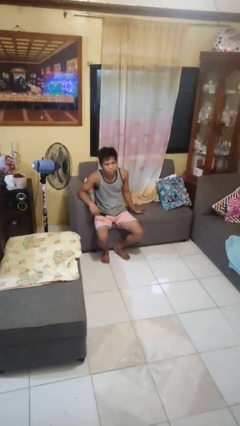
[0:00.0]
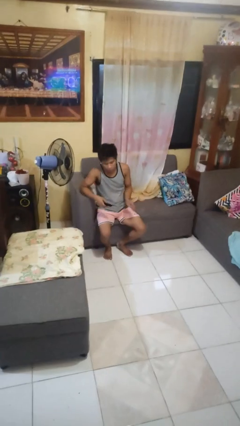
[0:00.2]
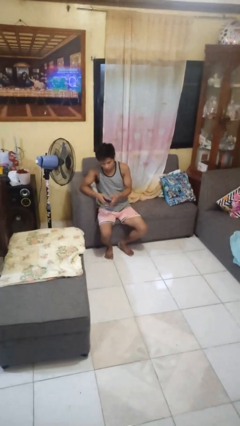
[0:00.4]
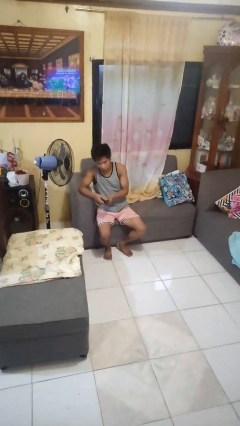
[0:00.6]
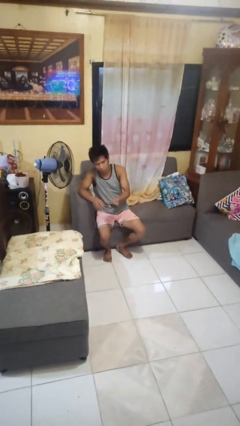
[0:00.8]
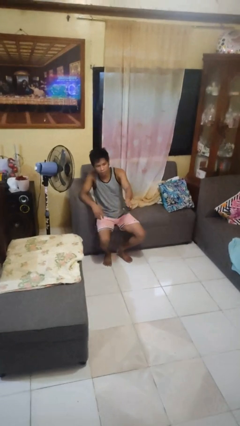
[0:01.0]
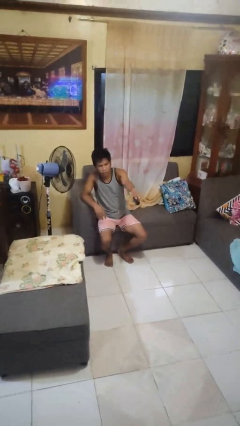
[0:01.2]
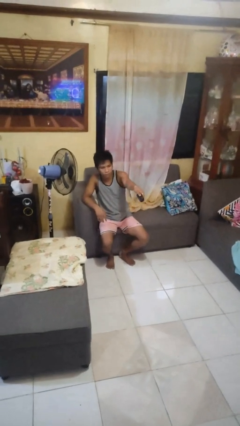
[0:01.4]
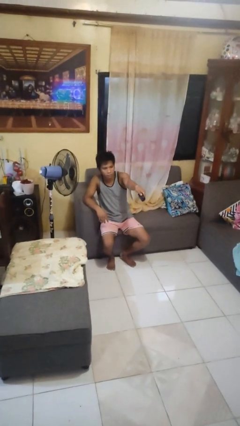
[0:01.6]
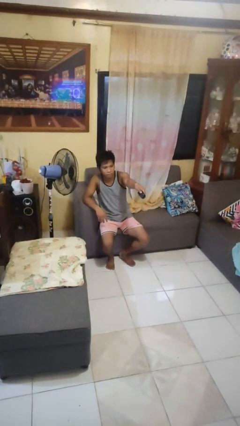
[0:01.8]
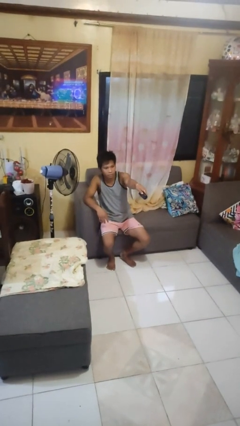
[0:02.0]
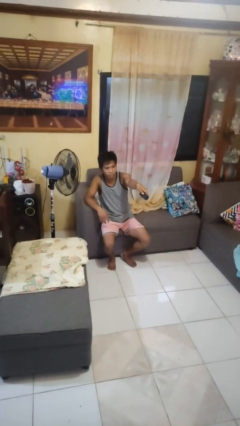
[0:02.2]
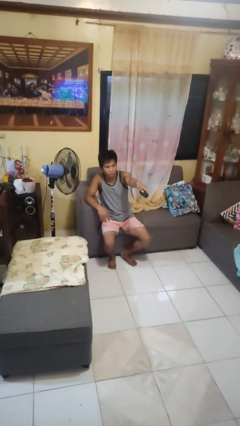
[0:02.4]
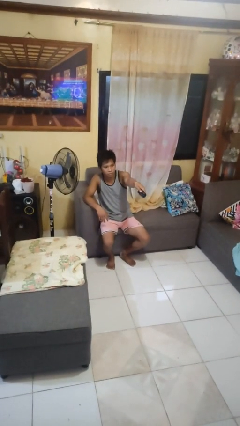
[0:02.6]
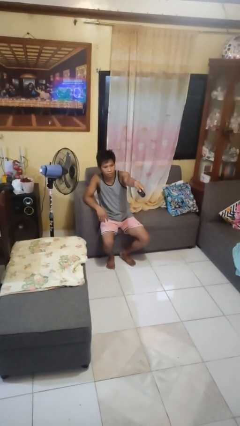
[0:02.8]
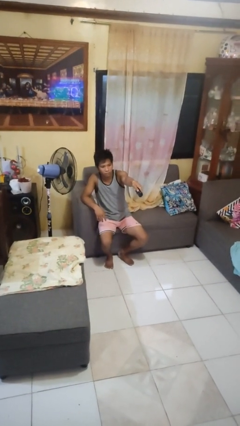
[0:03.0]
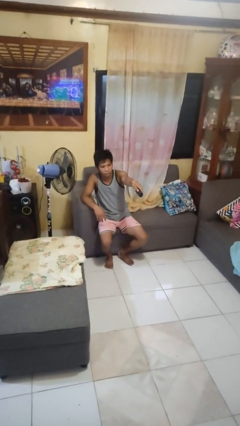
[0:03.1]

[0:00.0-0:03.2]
person uses television remote

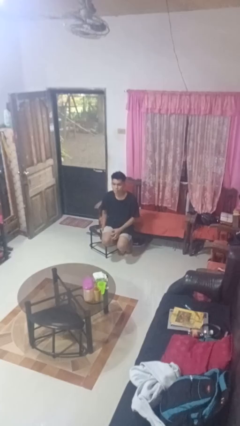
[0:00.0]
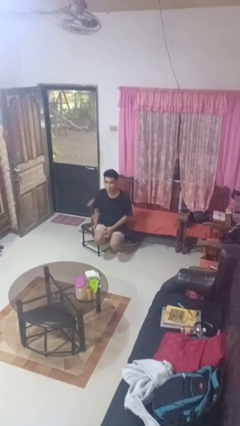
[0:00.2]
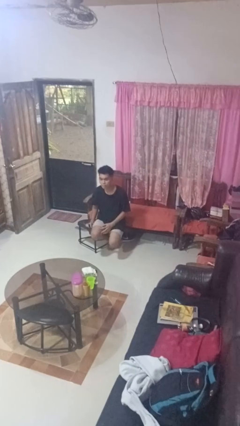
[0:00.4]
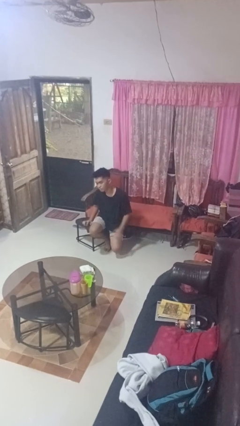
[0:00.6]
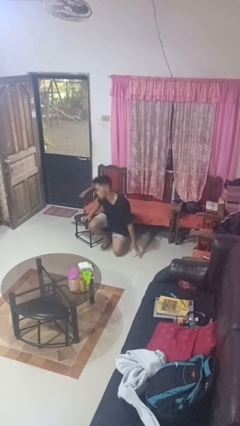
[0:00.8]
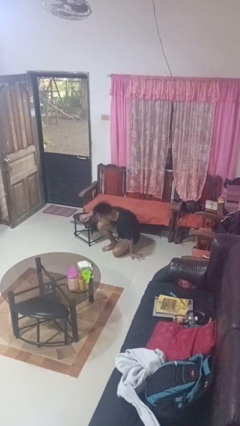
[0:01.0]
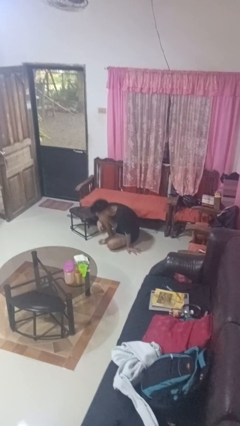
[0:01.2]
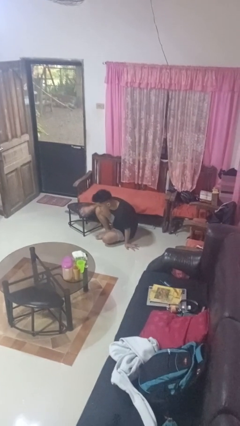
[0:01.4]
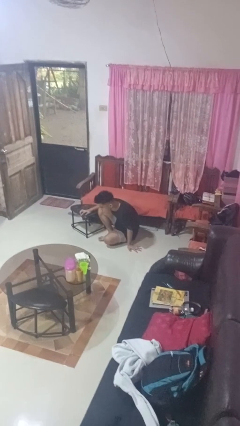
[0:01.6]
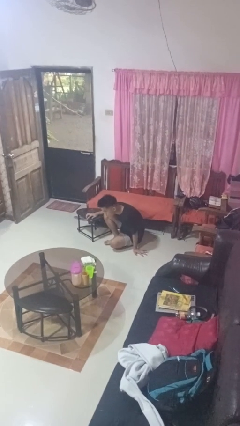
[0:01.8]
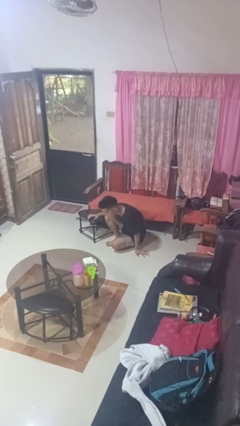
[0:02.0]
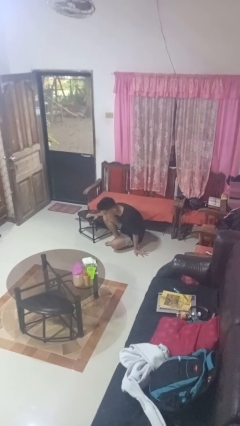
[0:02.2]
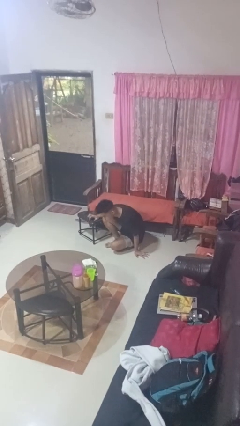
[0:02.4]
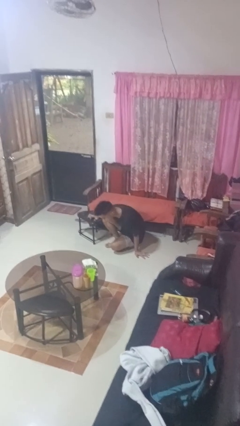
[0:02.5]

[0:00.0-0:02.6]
person falls from chair

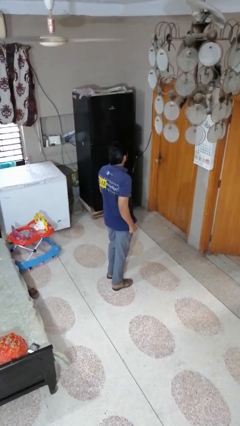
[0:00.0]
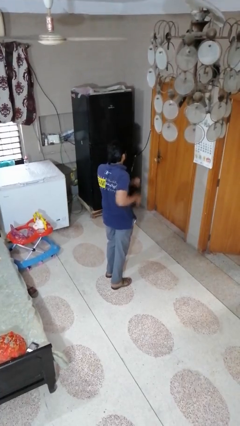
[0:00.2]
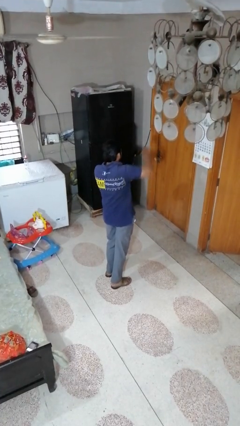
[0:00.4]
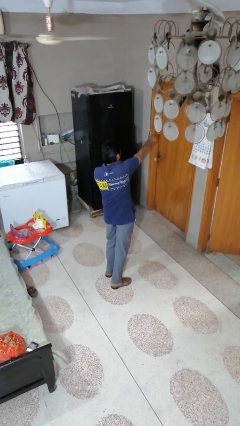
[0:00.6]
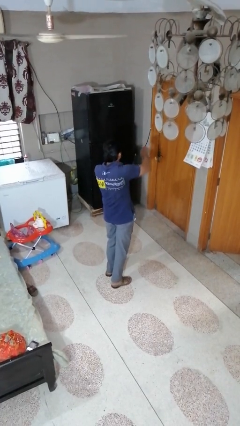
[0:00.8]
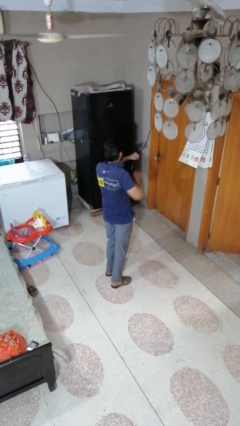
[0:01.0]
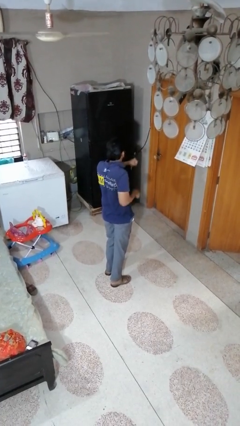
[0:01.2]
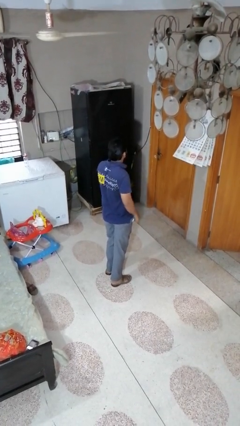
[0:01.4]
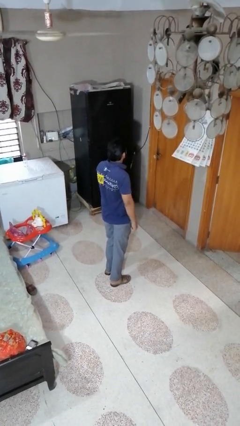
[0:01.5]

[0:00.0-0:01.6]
person karate chop

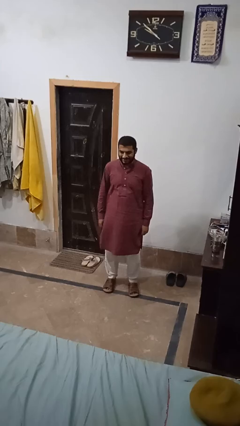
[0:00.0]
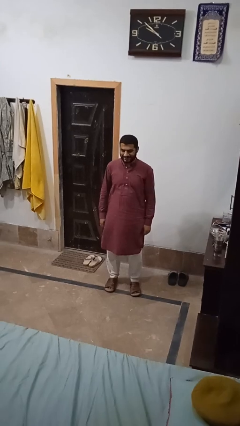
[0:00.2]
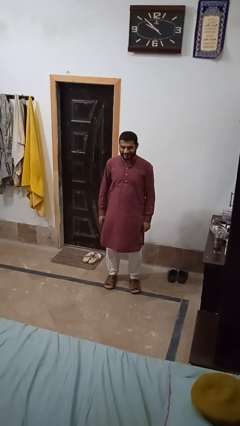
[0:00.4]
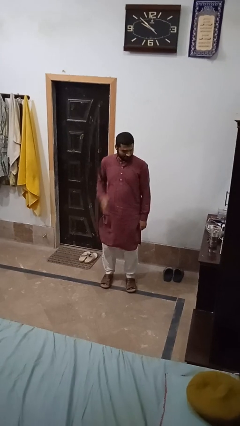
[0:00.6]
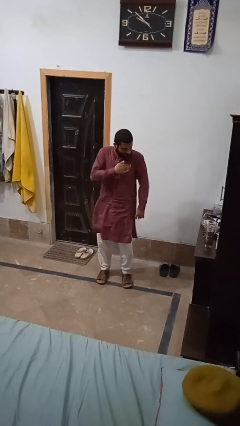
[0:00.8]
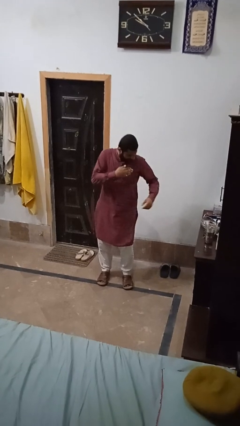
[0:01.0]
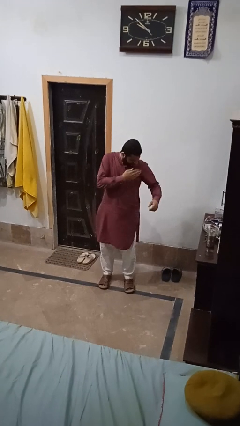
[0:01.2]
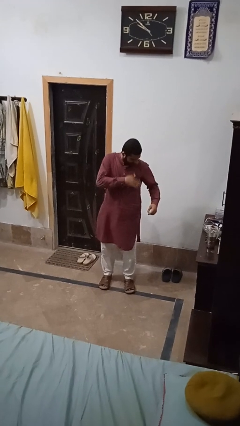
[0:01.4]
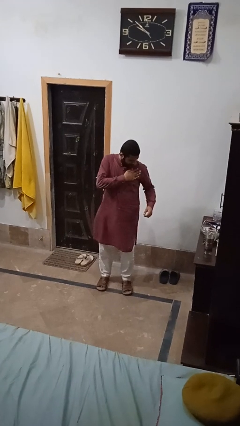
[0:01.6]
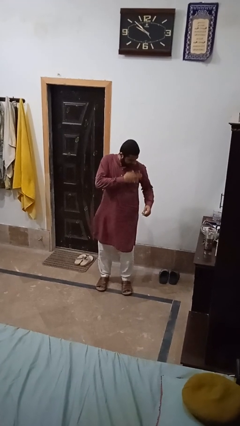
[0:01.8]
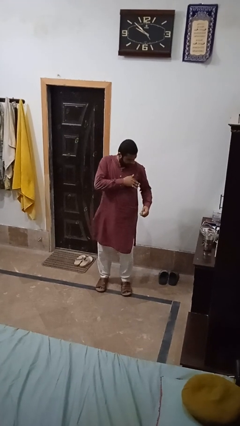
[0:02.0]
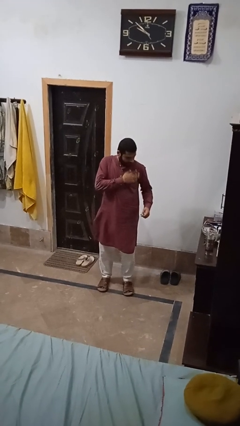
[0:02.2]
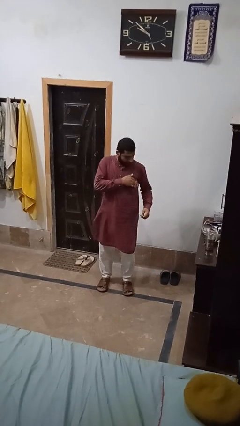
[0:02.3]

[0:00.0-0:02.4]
person swats bug

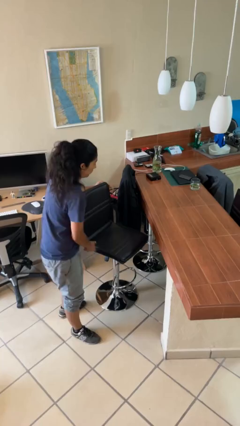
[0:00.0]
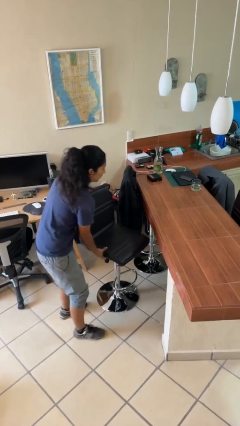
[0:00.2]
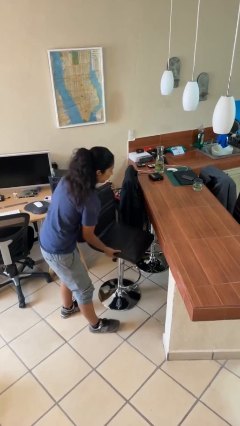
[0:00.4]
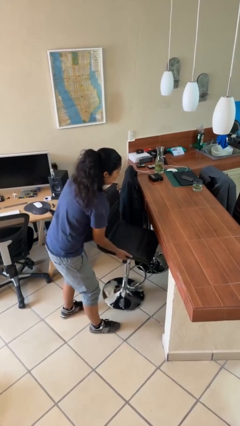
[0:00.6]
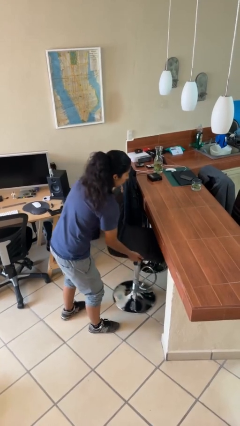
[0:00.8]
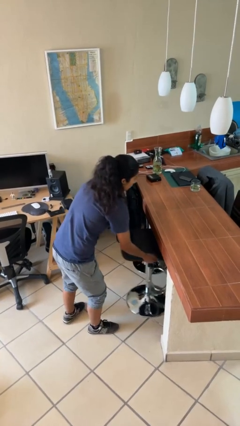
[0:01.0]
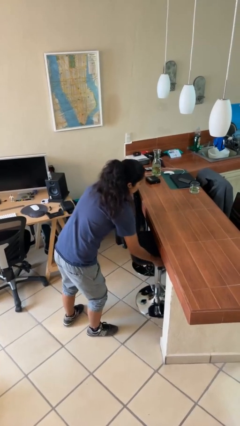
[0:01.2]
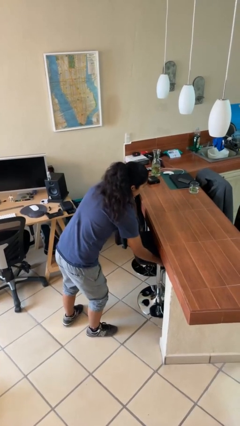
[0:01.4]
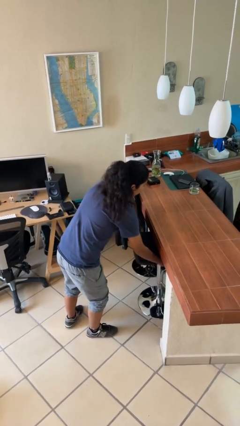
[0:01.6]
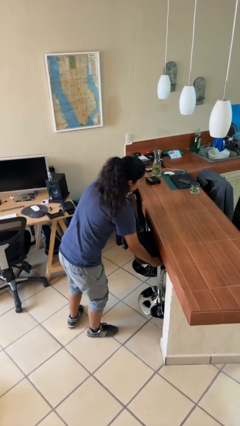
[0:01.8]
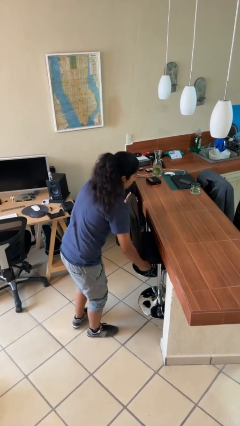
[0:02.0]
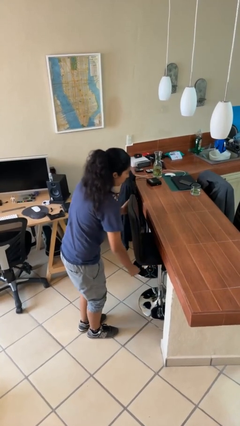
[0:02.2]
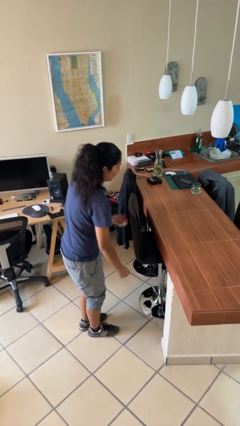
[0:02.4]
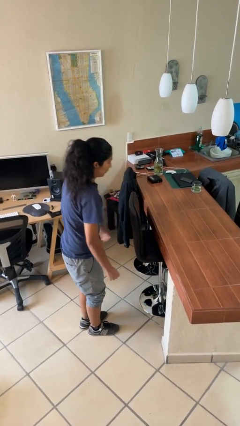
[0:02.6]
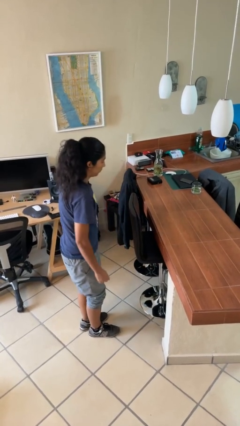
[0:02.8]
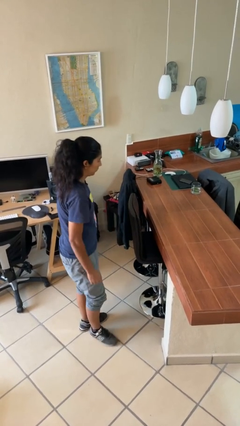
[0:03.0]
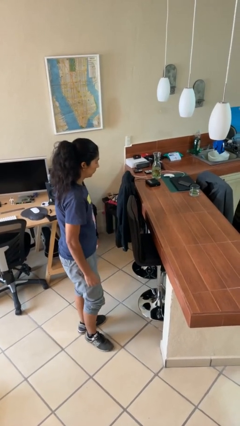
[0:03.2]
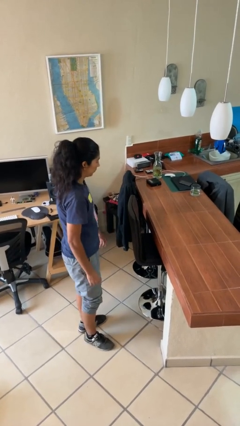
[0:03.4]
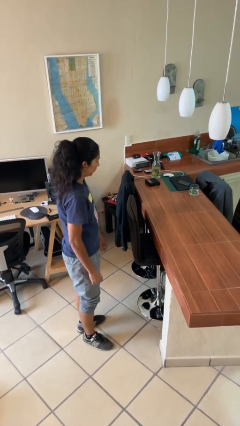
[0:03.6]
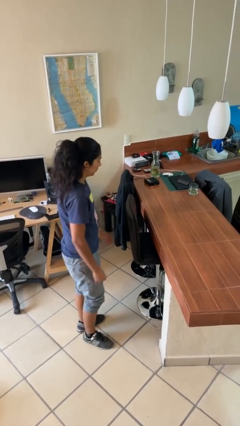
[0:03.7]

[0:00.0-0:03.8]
person pushes in chair

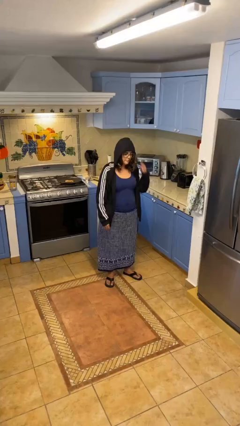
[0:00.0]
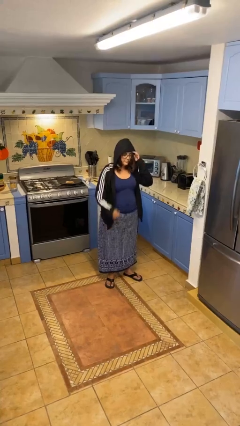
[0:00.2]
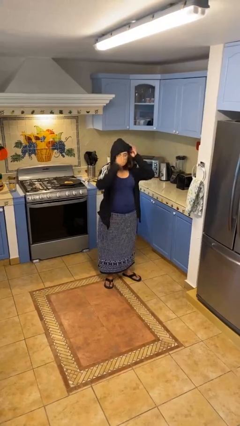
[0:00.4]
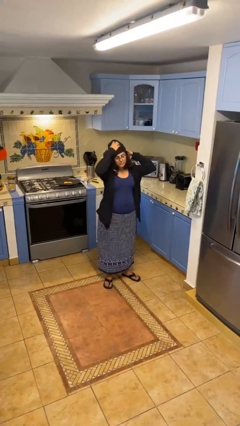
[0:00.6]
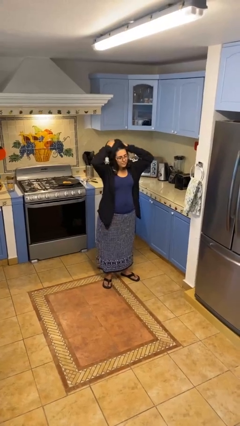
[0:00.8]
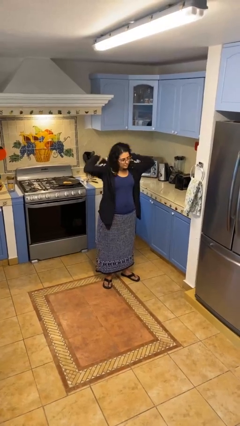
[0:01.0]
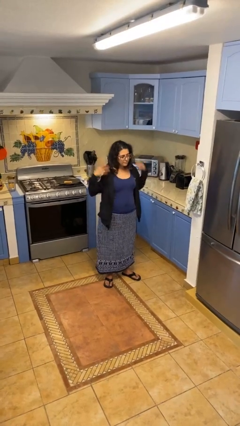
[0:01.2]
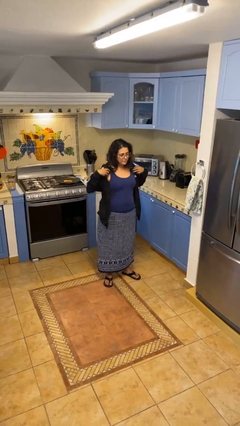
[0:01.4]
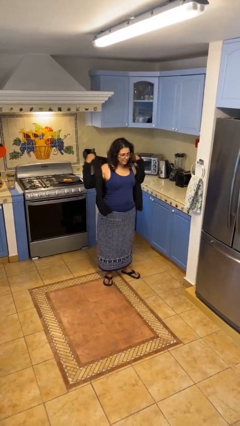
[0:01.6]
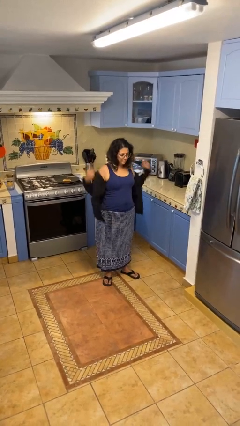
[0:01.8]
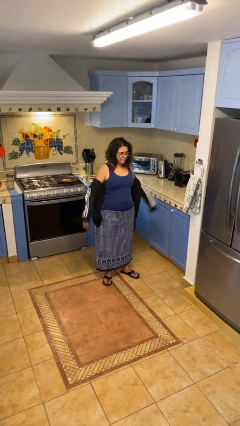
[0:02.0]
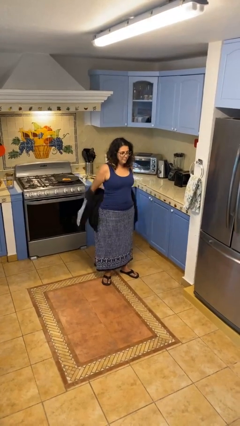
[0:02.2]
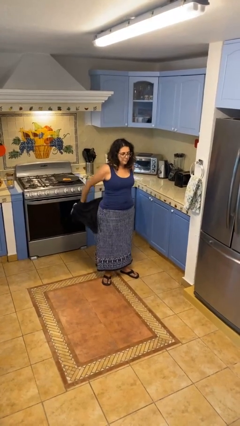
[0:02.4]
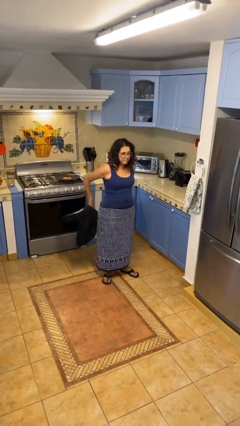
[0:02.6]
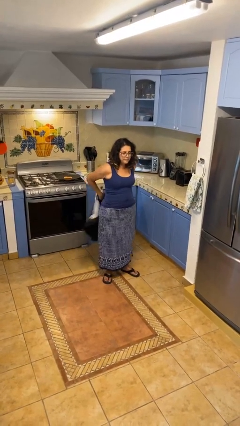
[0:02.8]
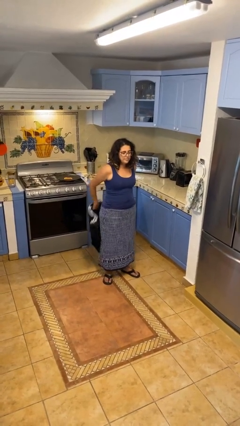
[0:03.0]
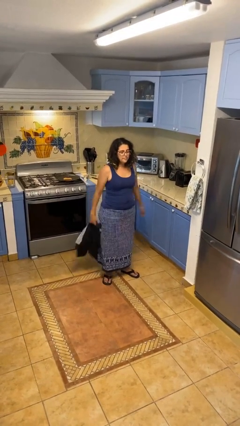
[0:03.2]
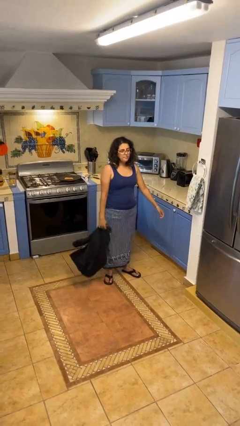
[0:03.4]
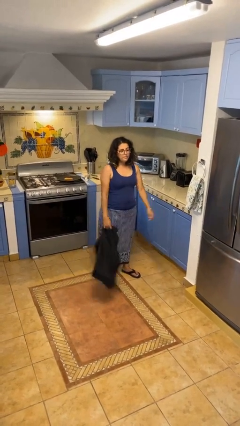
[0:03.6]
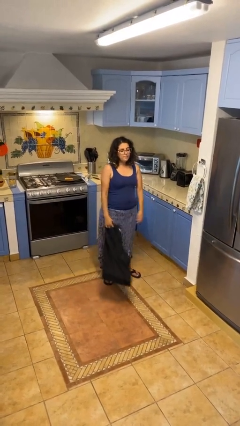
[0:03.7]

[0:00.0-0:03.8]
person takes off hoodie

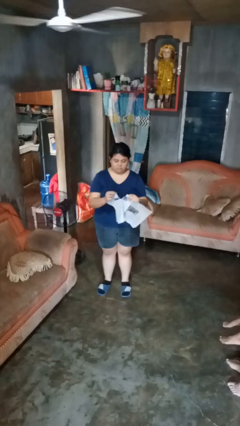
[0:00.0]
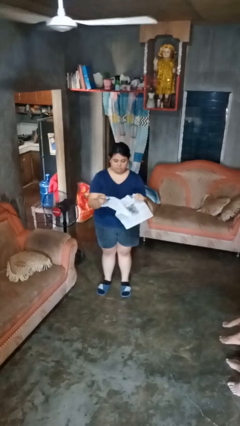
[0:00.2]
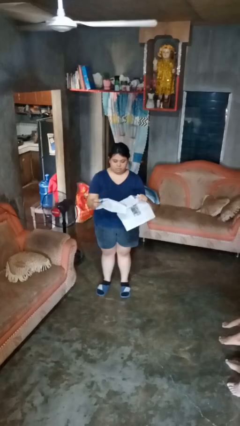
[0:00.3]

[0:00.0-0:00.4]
person tears paper
